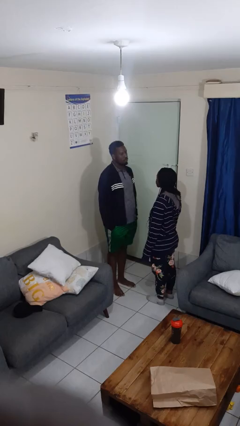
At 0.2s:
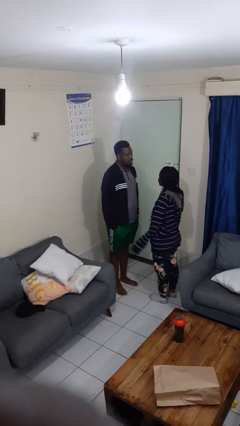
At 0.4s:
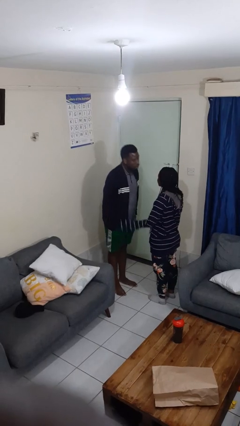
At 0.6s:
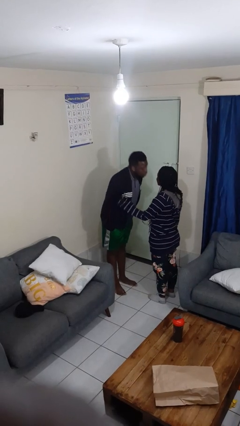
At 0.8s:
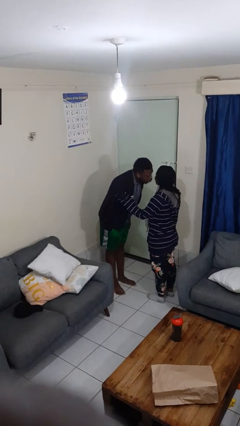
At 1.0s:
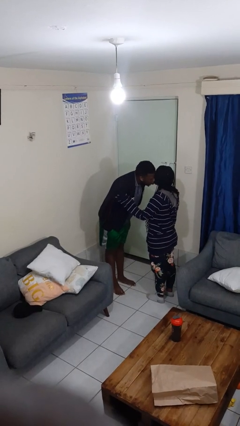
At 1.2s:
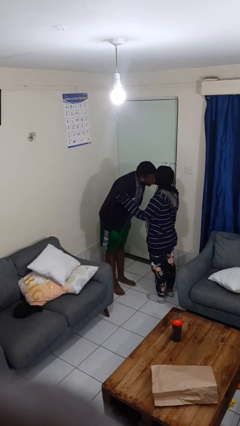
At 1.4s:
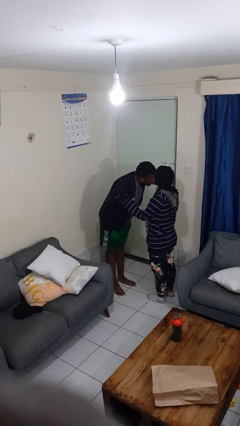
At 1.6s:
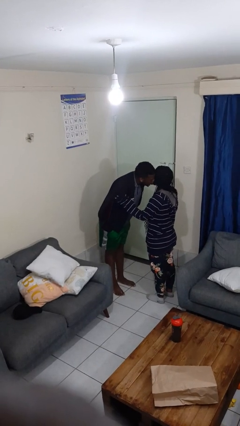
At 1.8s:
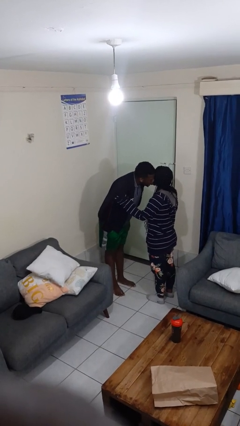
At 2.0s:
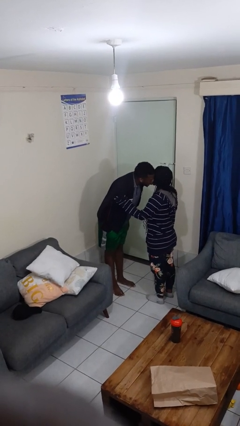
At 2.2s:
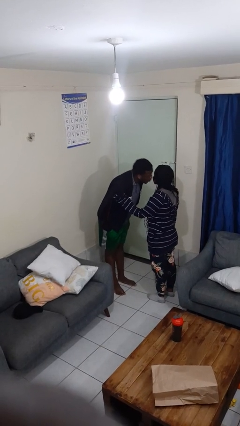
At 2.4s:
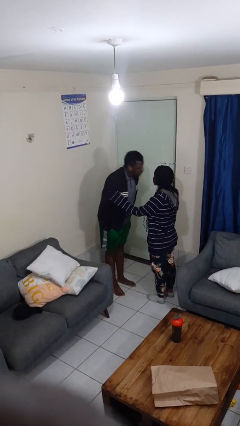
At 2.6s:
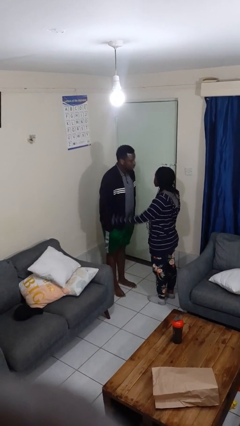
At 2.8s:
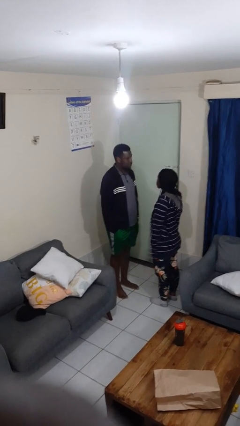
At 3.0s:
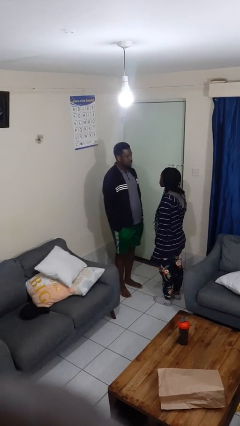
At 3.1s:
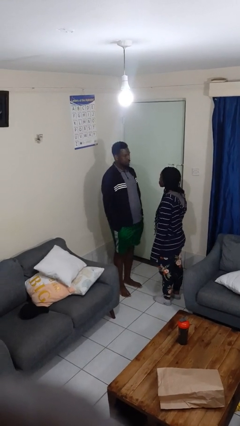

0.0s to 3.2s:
person kisses cheek of person

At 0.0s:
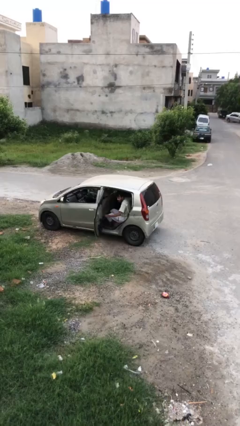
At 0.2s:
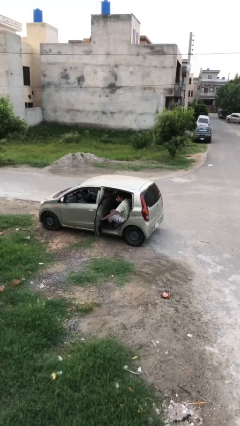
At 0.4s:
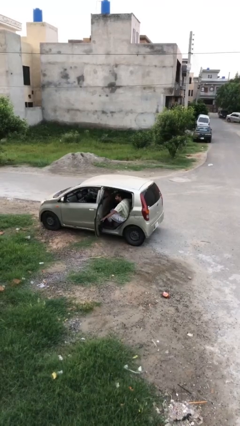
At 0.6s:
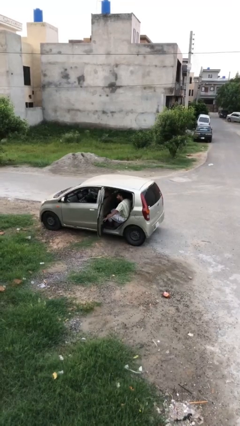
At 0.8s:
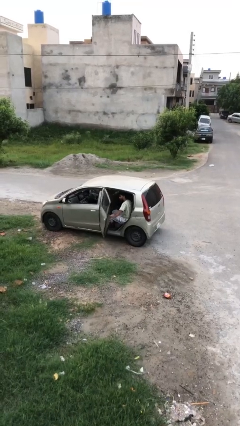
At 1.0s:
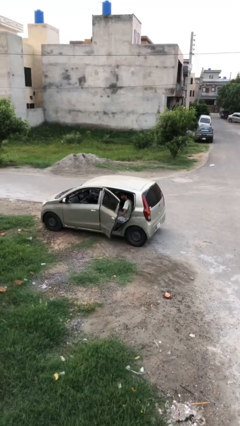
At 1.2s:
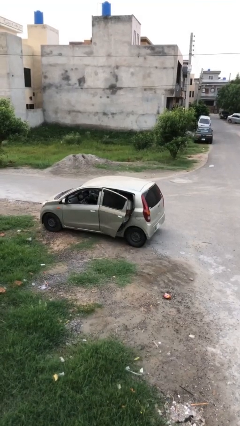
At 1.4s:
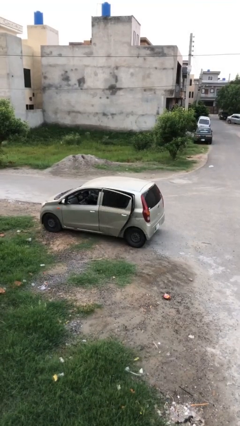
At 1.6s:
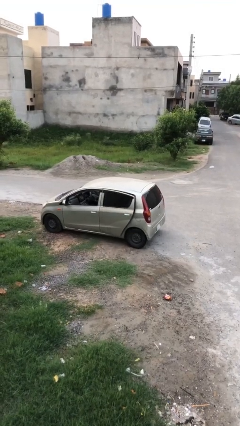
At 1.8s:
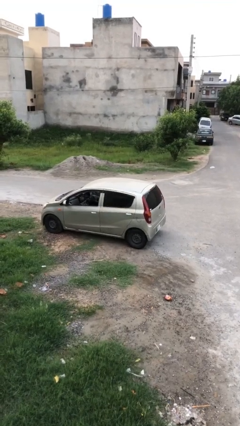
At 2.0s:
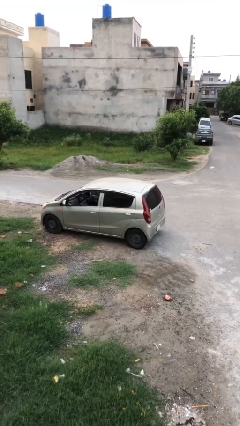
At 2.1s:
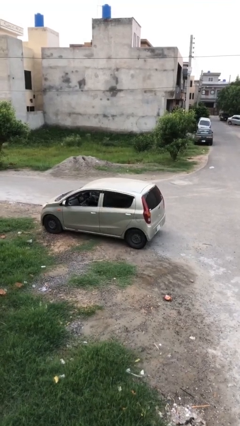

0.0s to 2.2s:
person closes car door

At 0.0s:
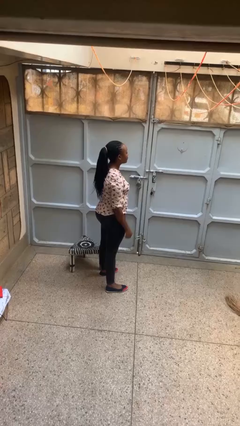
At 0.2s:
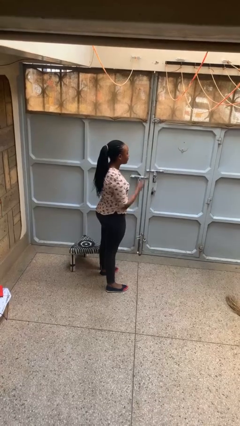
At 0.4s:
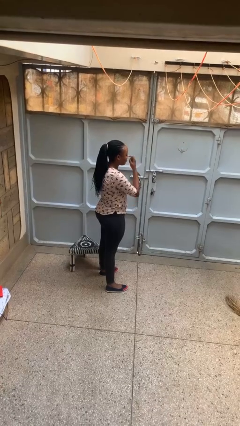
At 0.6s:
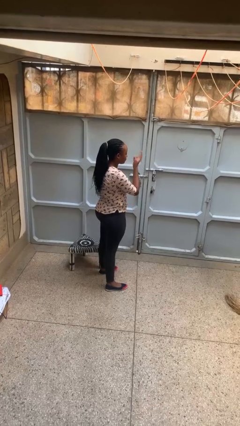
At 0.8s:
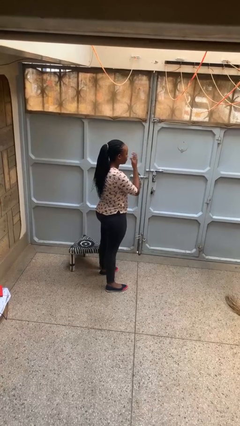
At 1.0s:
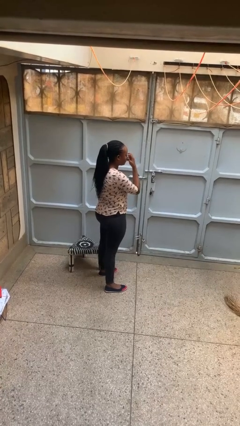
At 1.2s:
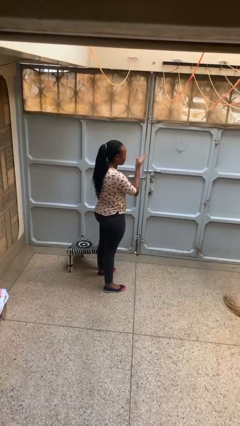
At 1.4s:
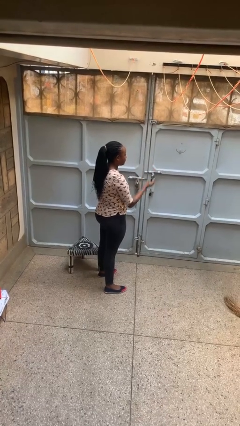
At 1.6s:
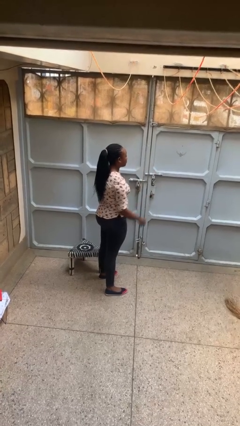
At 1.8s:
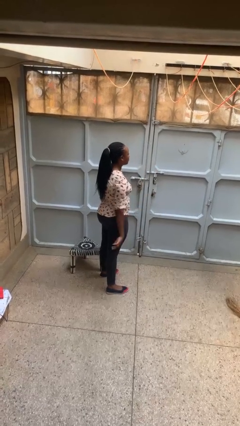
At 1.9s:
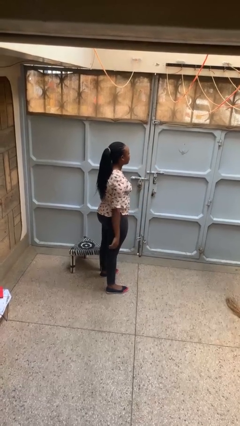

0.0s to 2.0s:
person gestures watch closely

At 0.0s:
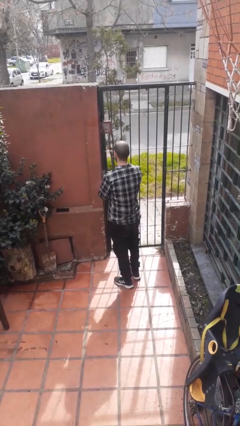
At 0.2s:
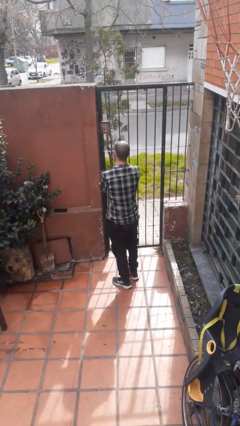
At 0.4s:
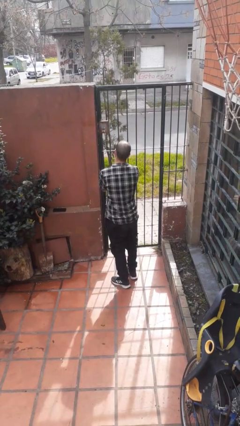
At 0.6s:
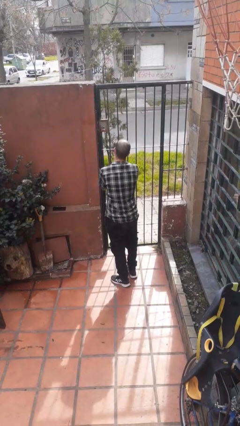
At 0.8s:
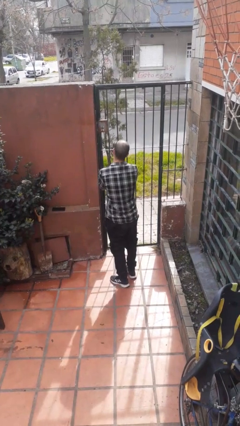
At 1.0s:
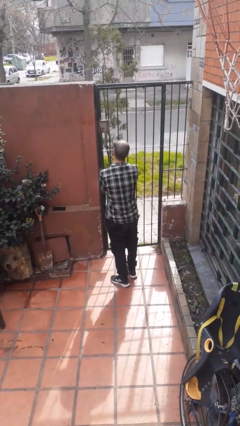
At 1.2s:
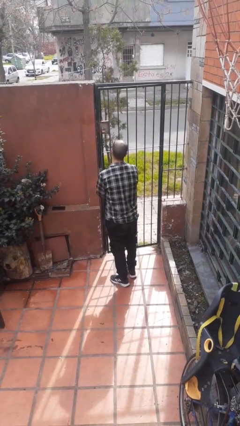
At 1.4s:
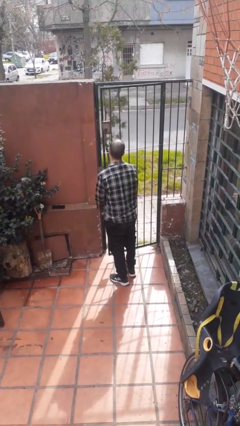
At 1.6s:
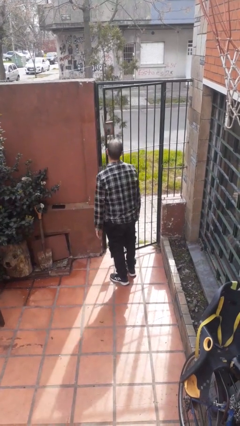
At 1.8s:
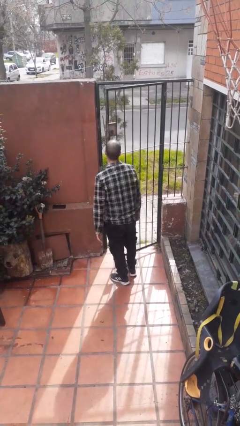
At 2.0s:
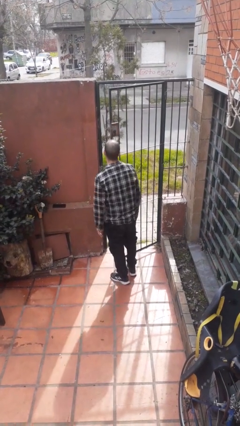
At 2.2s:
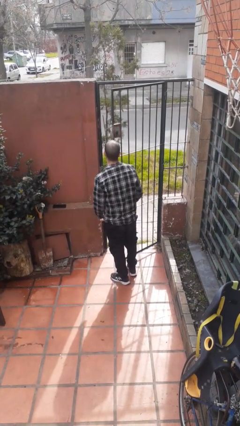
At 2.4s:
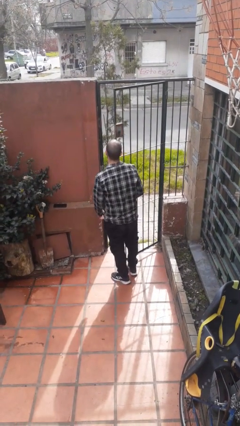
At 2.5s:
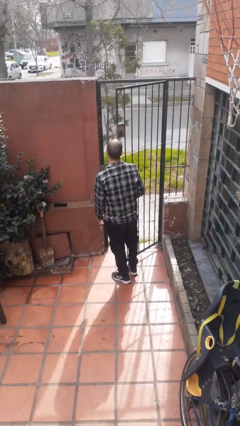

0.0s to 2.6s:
person opens gate

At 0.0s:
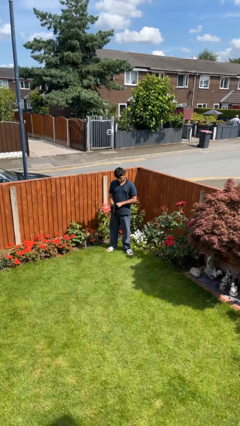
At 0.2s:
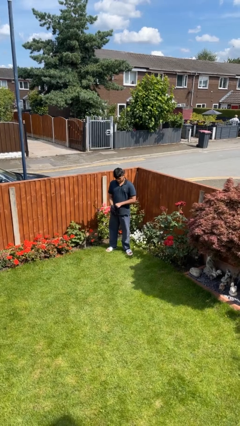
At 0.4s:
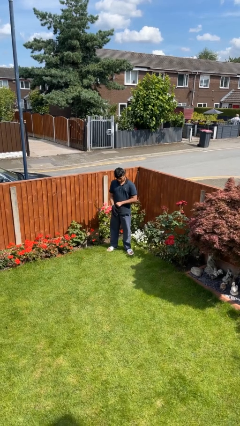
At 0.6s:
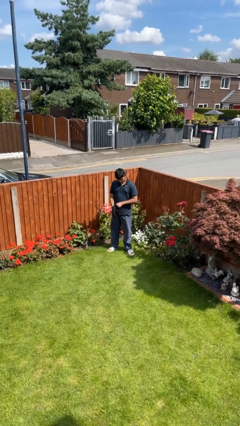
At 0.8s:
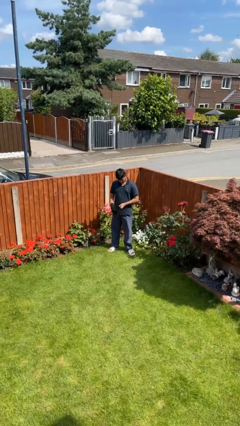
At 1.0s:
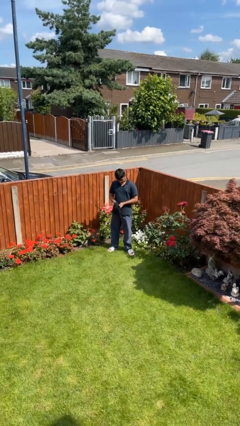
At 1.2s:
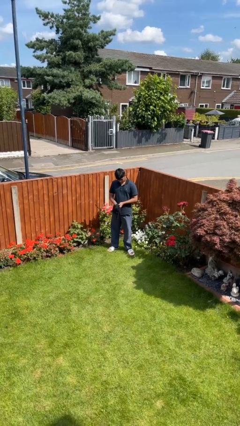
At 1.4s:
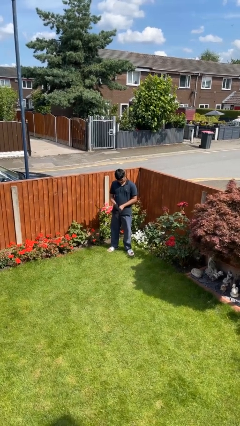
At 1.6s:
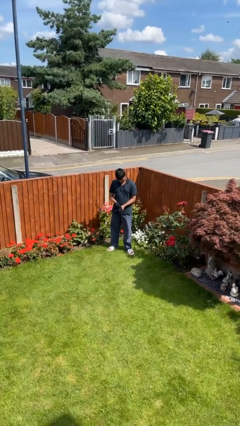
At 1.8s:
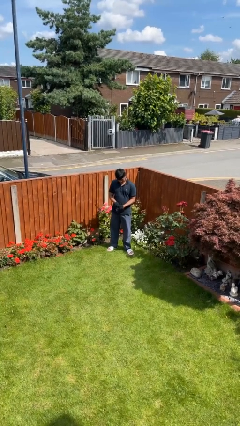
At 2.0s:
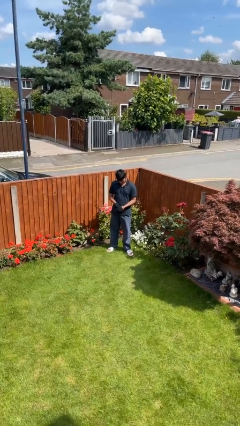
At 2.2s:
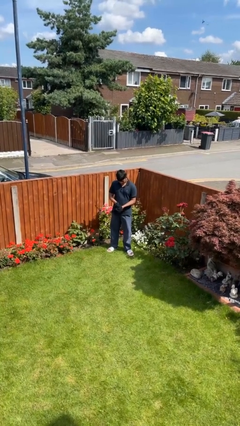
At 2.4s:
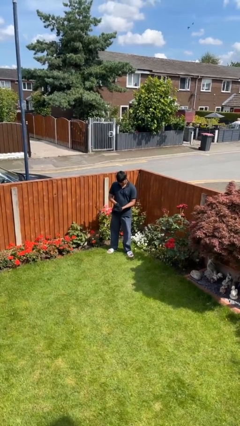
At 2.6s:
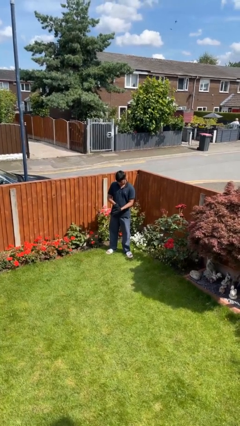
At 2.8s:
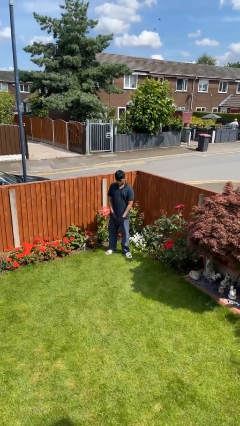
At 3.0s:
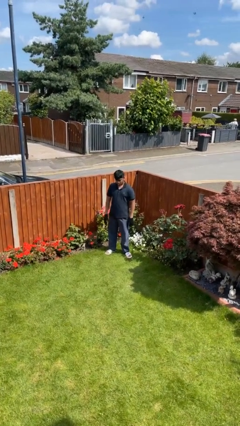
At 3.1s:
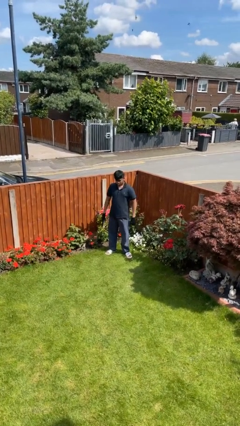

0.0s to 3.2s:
person puts on gloves

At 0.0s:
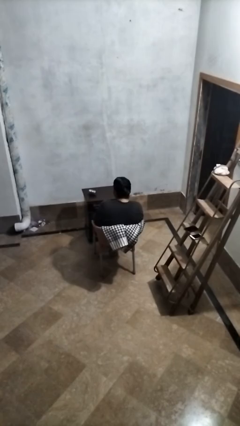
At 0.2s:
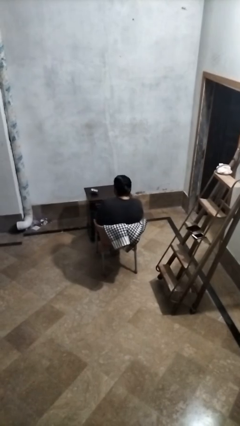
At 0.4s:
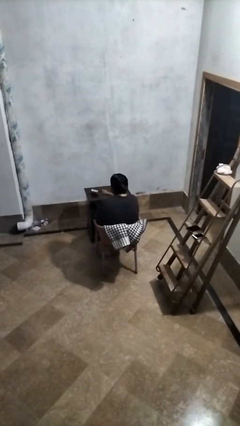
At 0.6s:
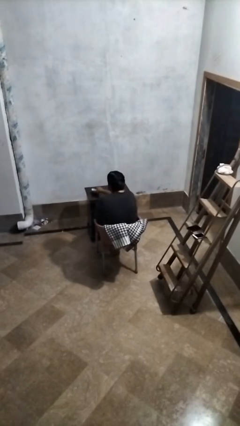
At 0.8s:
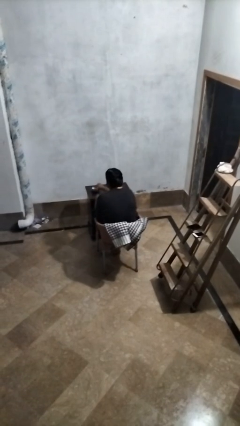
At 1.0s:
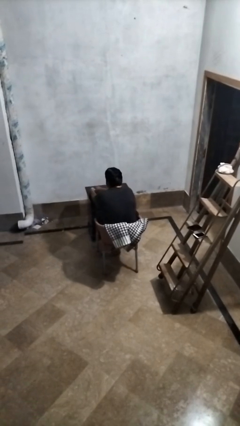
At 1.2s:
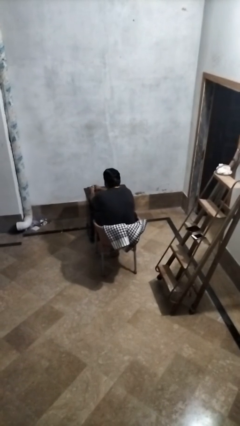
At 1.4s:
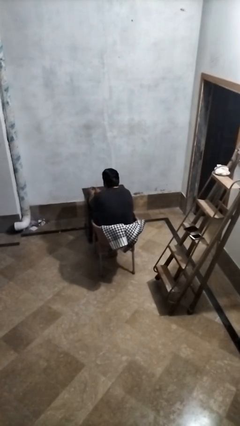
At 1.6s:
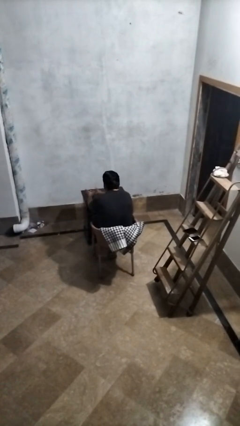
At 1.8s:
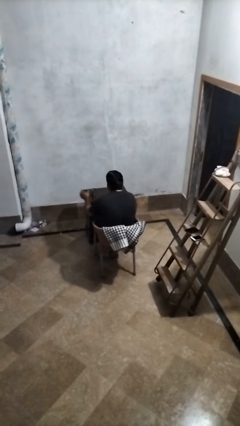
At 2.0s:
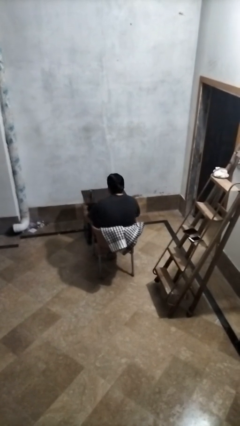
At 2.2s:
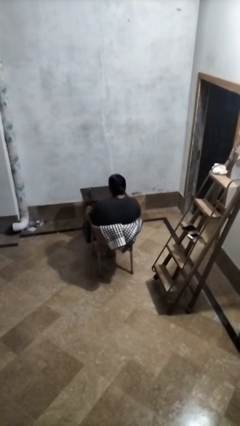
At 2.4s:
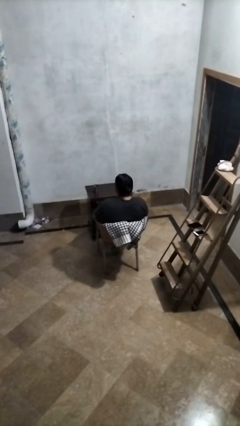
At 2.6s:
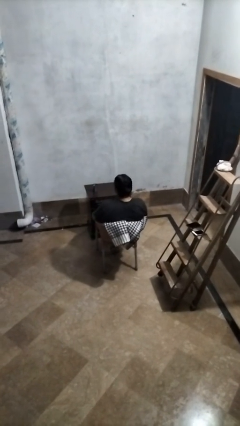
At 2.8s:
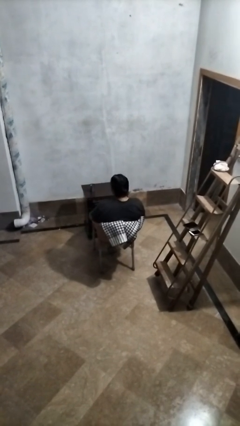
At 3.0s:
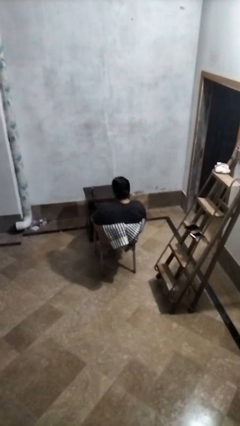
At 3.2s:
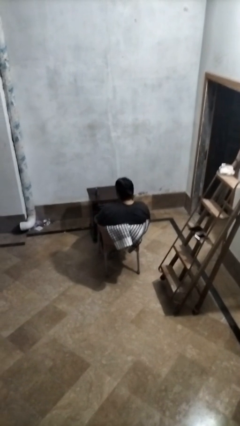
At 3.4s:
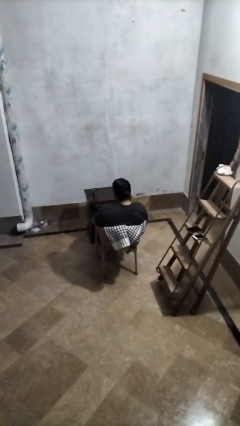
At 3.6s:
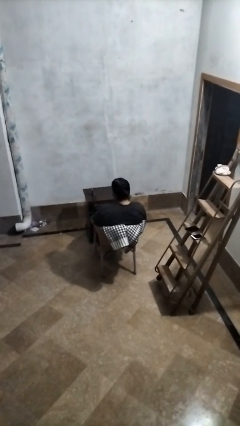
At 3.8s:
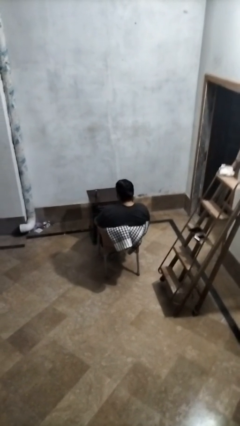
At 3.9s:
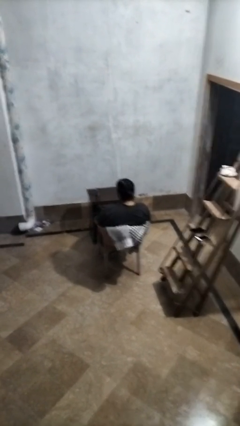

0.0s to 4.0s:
person sets upright glass

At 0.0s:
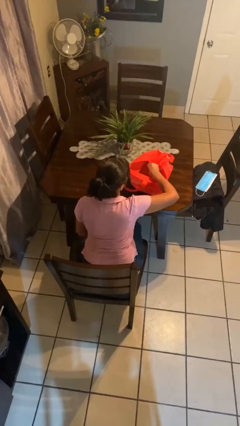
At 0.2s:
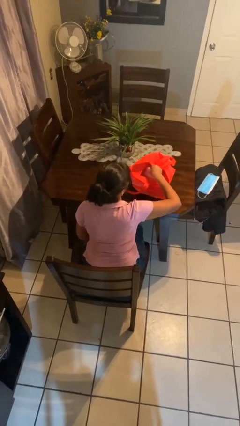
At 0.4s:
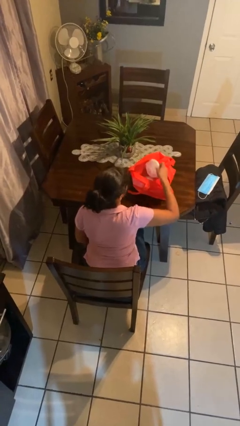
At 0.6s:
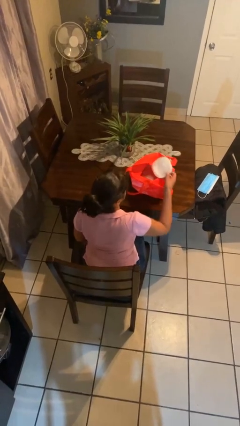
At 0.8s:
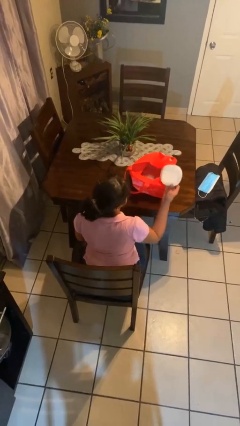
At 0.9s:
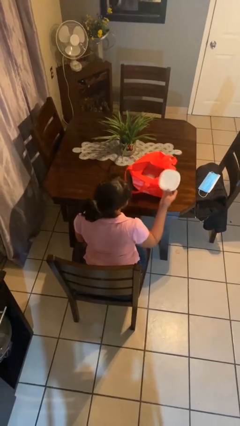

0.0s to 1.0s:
person takes object from bag
